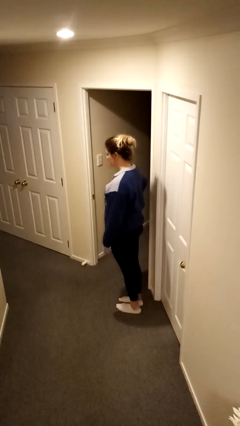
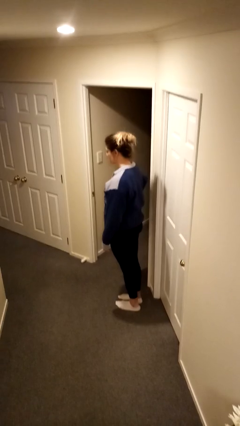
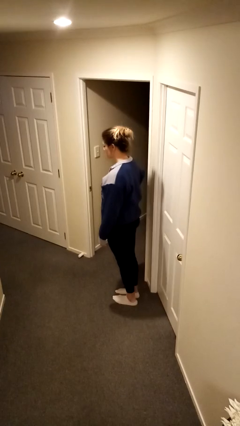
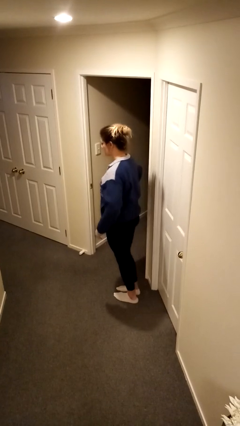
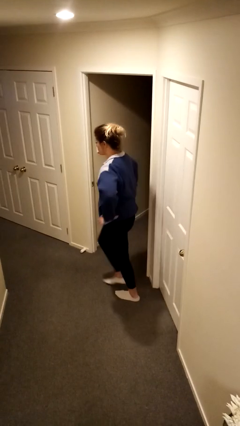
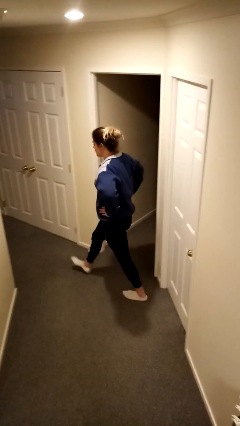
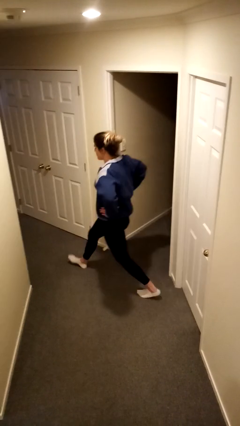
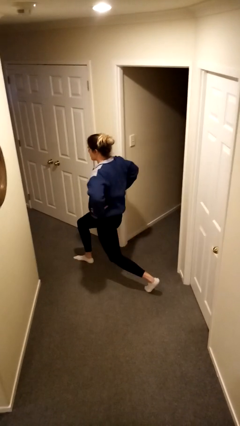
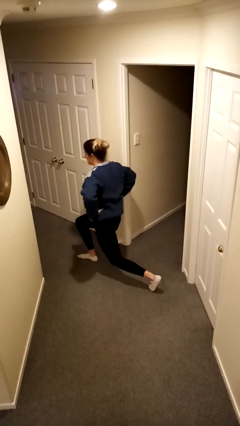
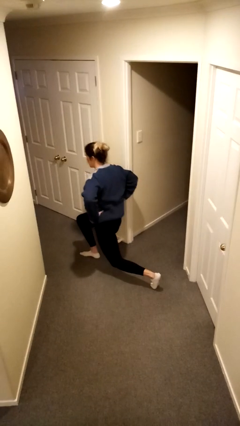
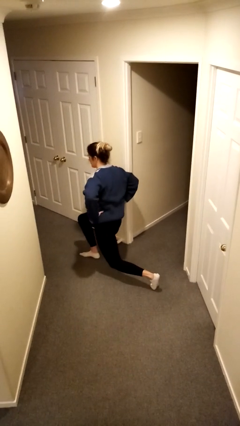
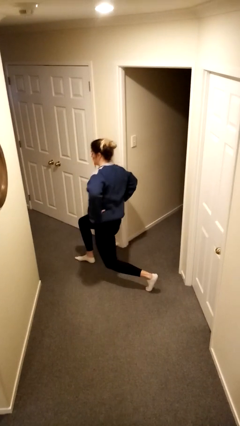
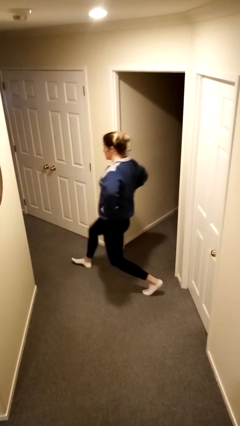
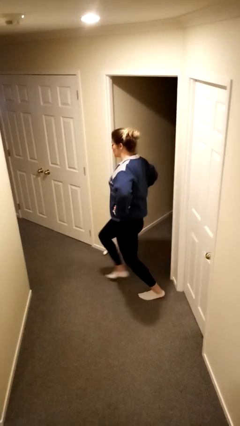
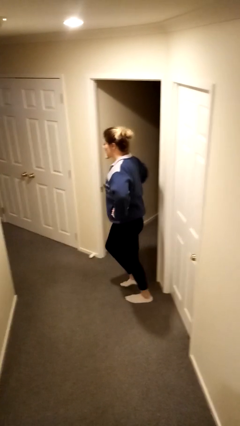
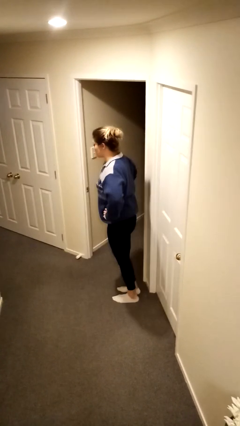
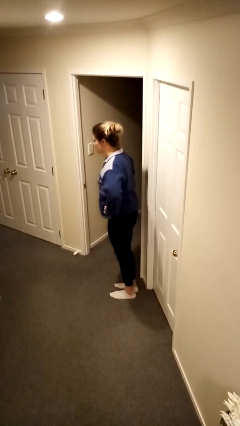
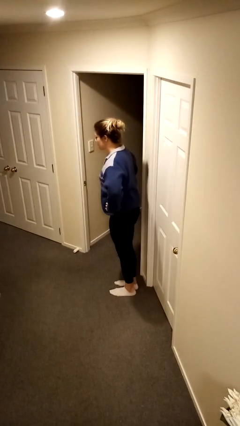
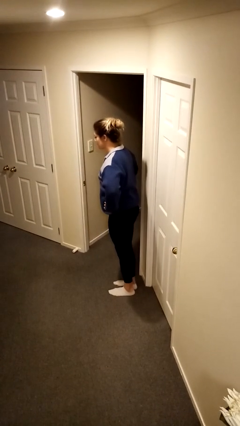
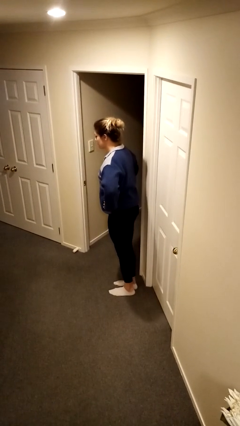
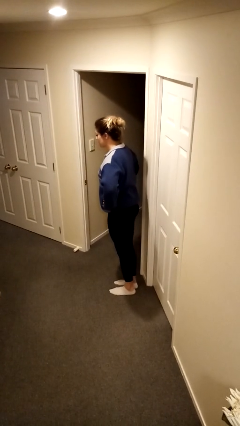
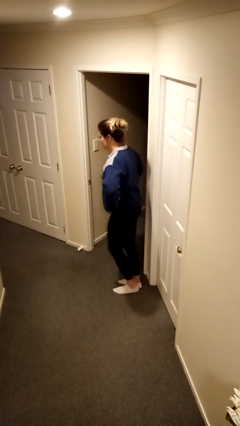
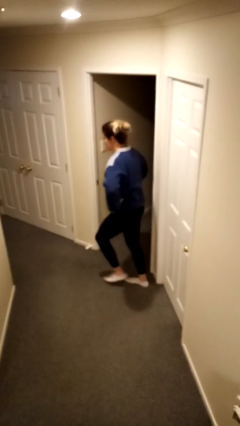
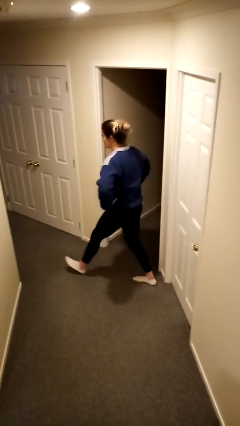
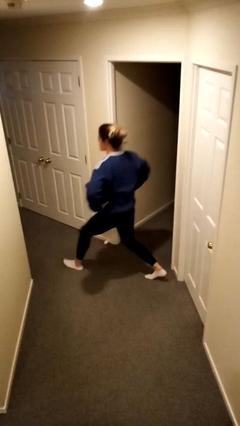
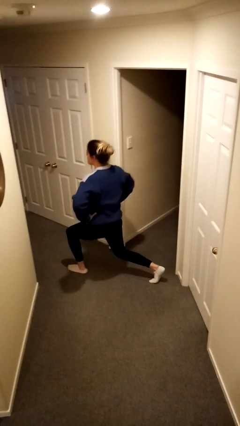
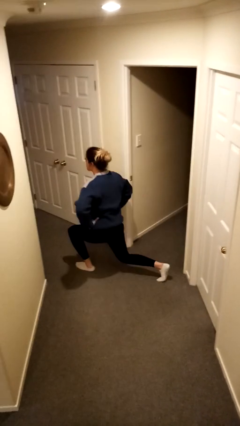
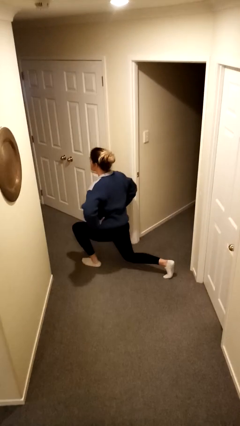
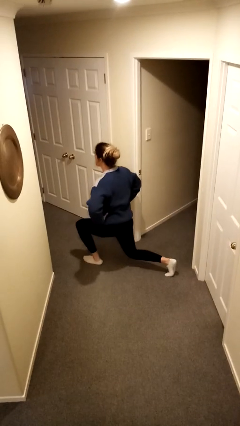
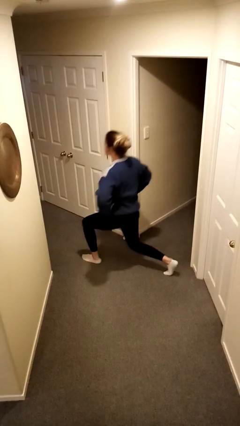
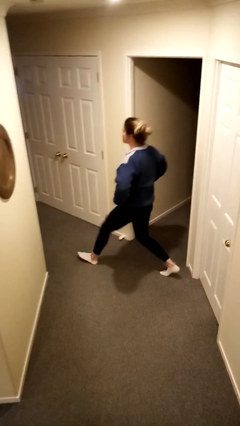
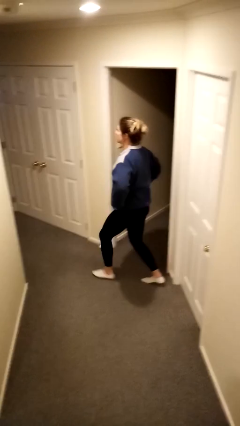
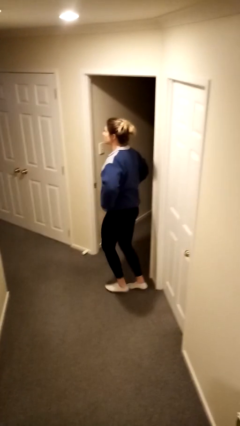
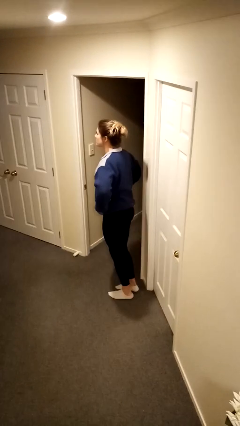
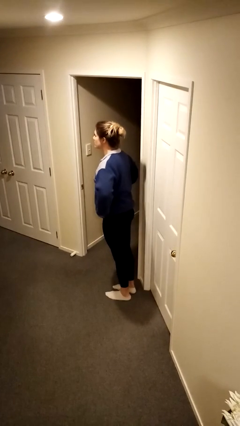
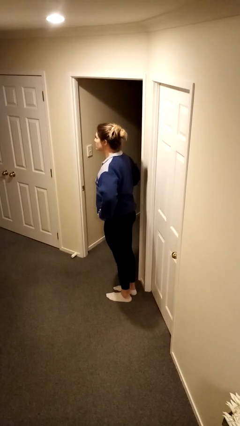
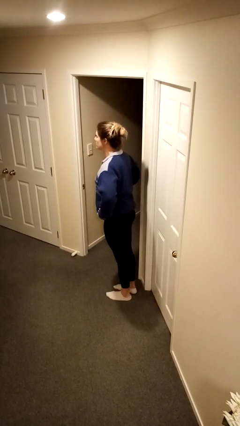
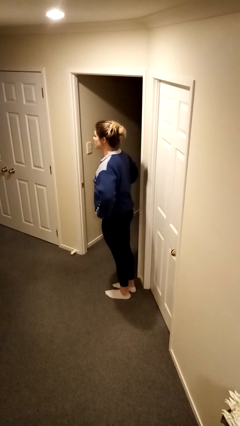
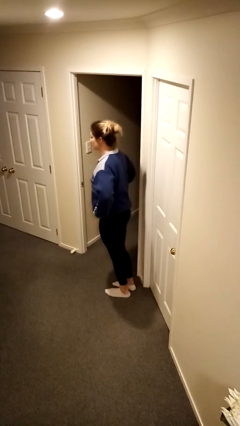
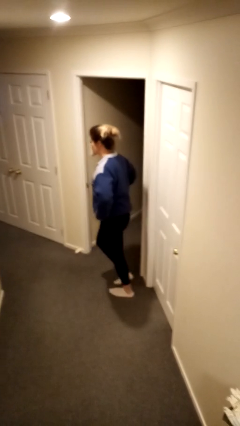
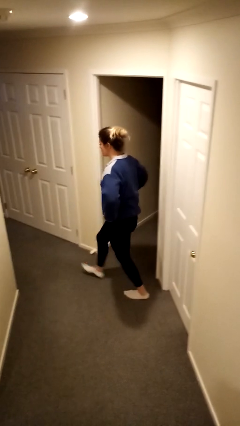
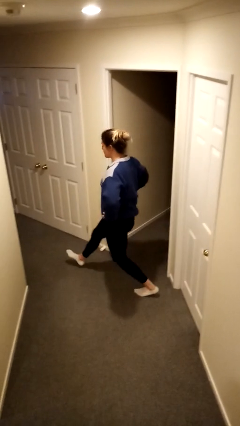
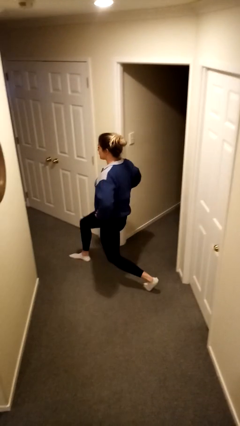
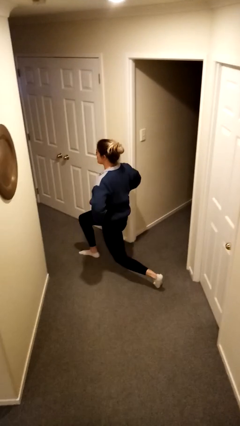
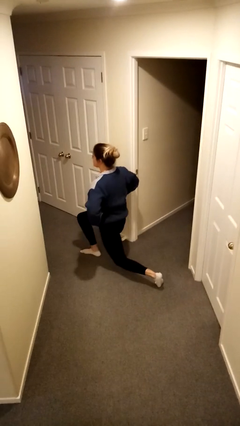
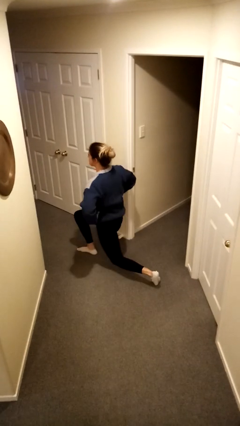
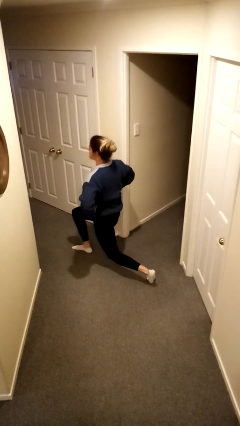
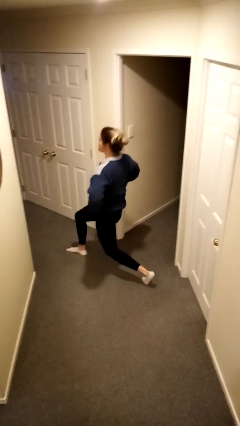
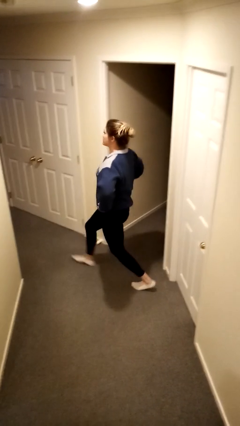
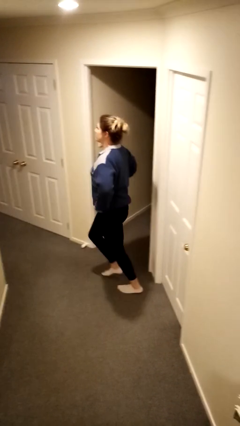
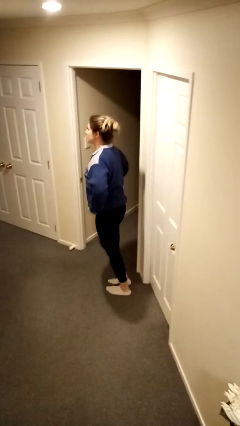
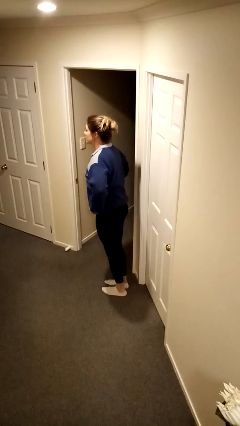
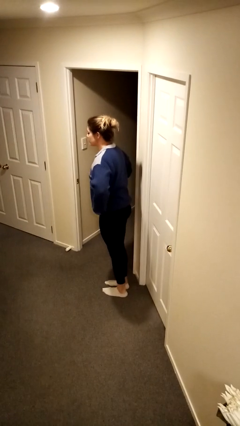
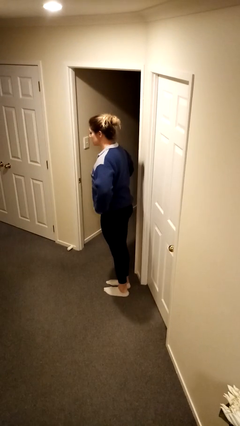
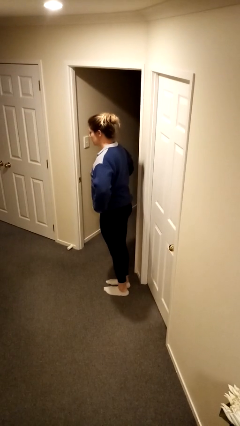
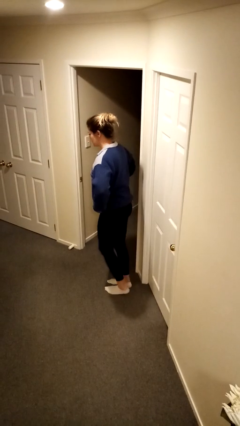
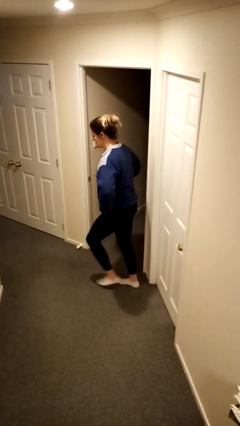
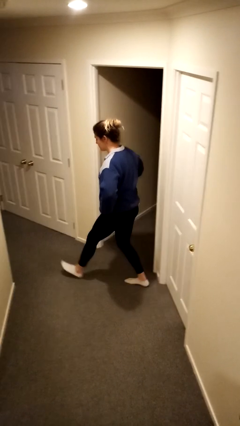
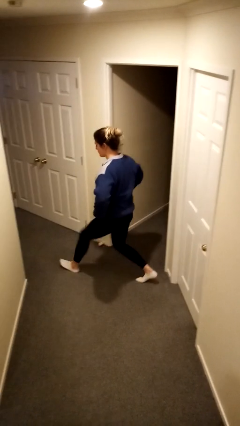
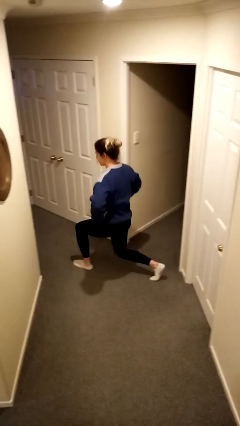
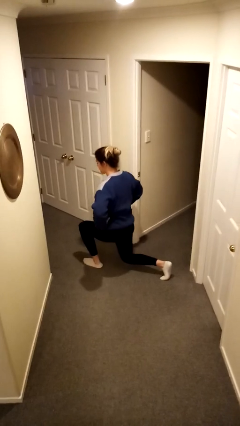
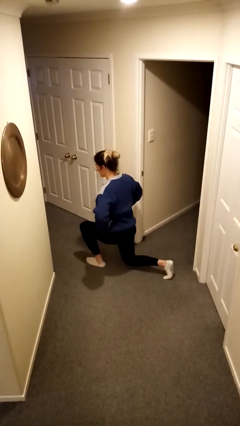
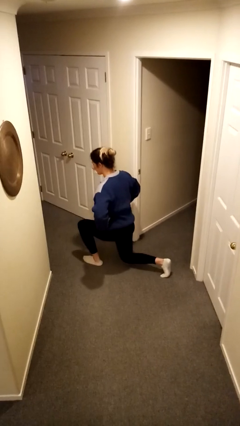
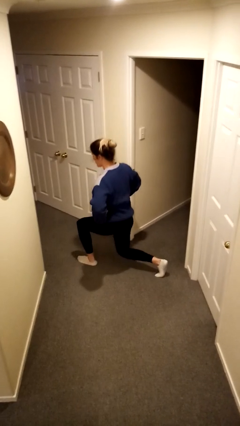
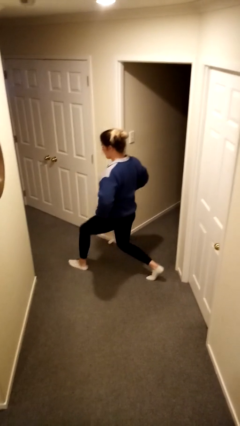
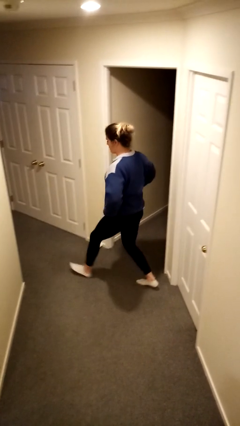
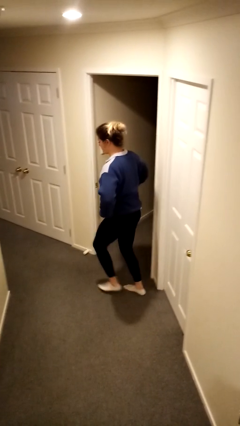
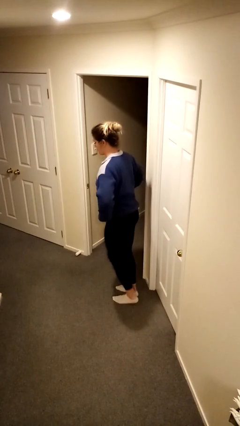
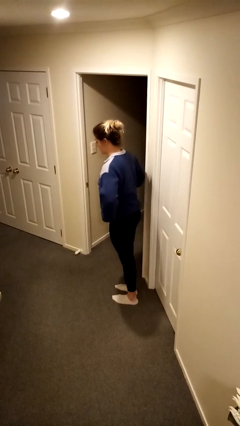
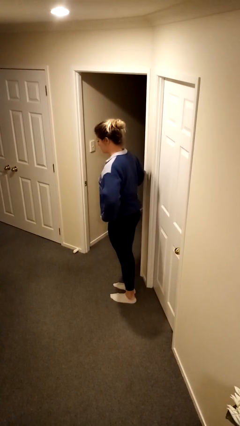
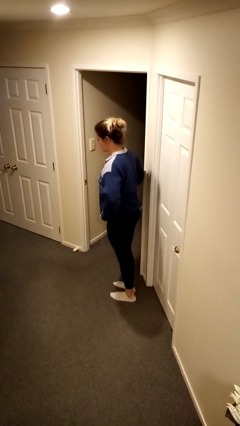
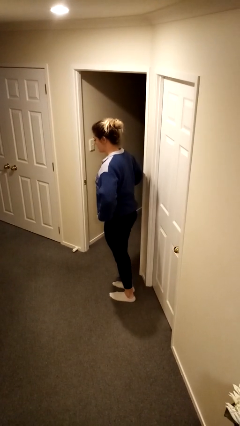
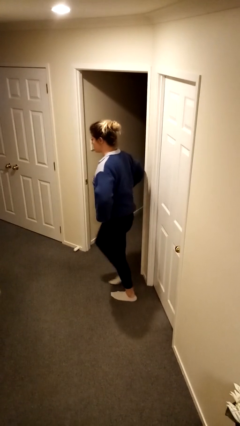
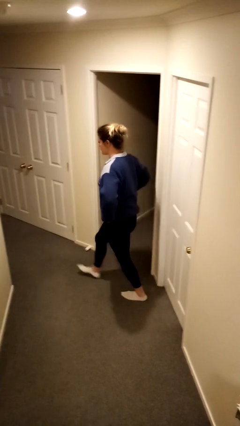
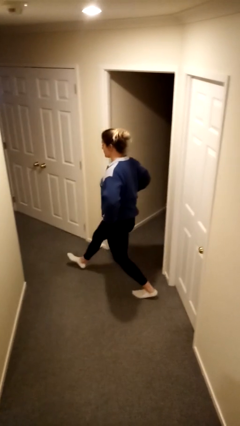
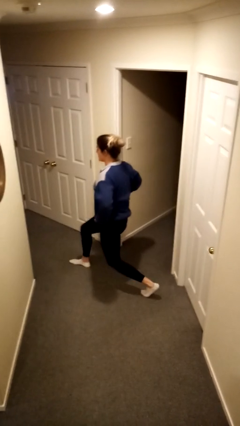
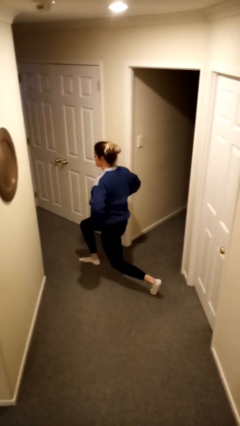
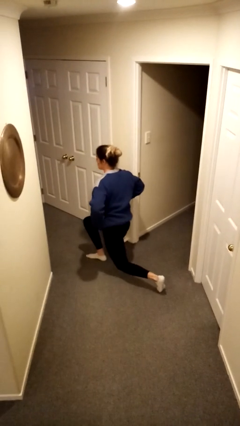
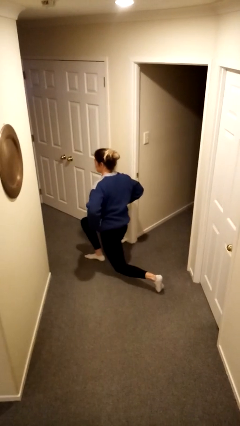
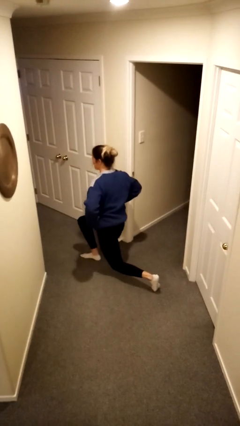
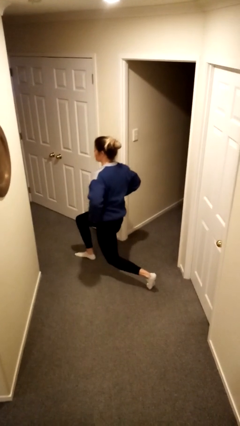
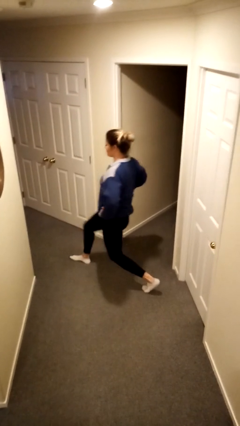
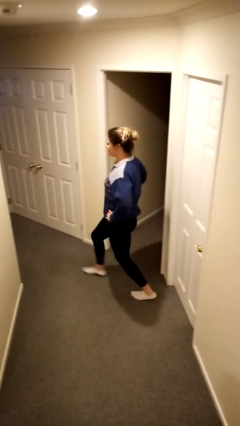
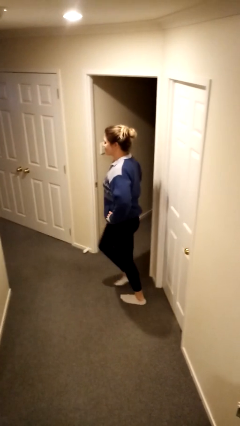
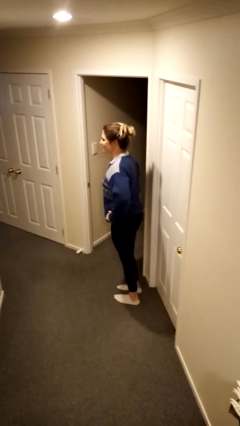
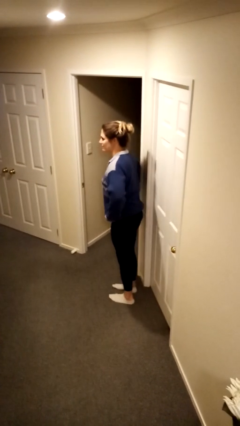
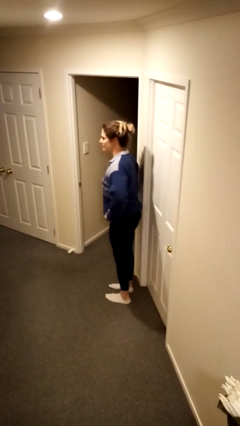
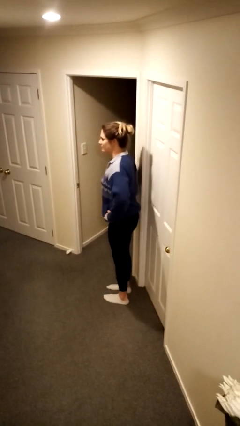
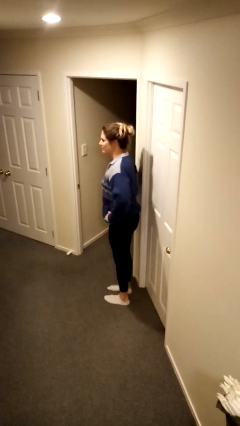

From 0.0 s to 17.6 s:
person exercises with lunges

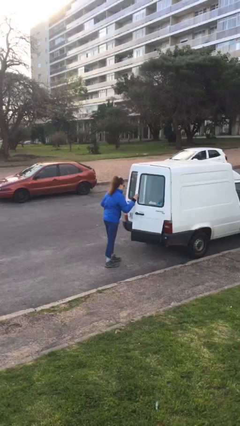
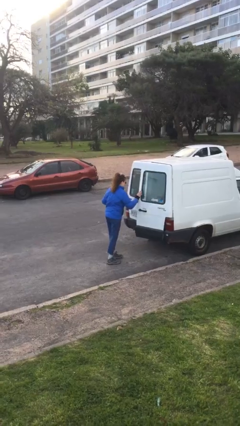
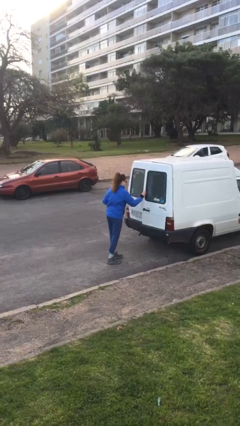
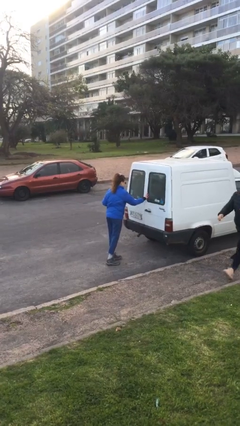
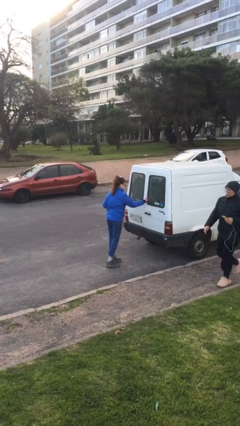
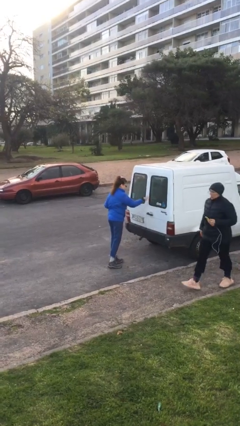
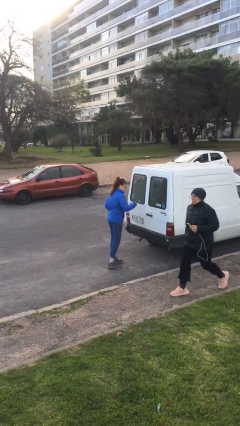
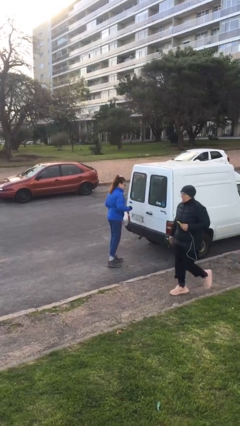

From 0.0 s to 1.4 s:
person closes car door
